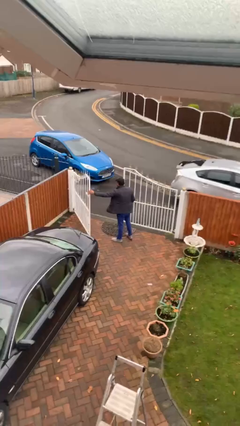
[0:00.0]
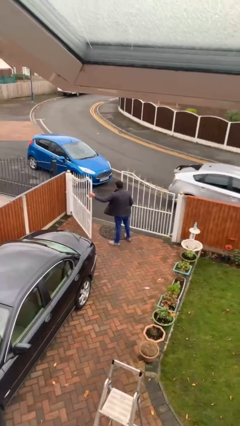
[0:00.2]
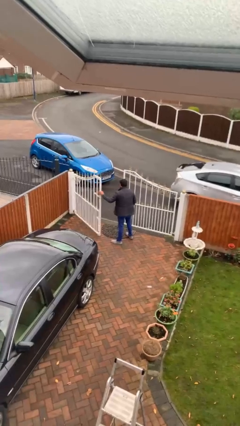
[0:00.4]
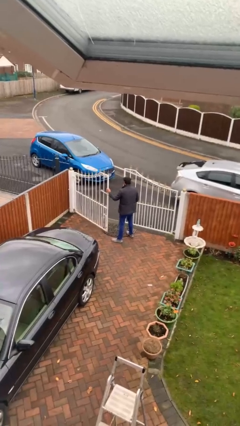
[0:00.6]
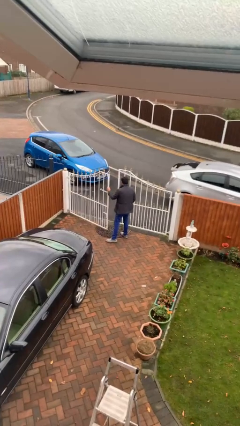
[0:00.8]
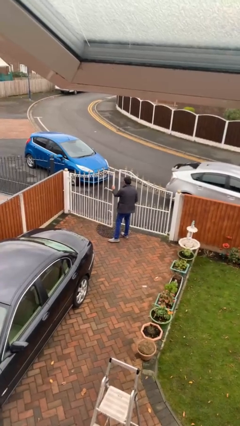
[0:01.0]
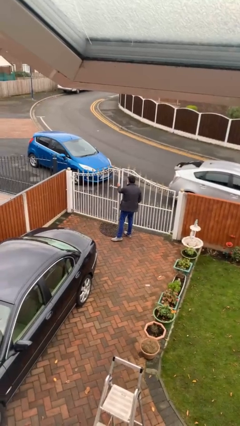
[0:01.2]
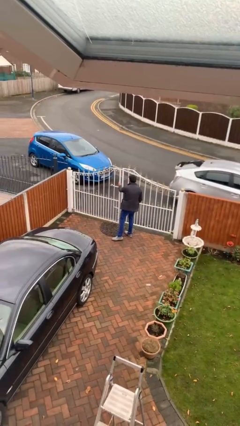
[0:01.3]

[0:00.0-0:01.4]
person closes facility door

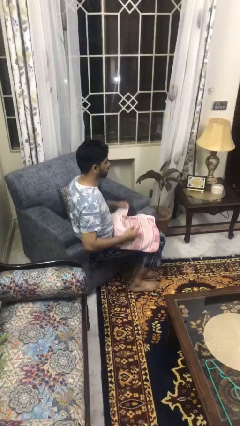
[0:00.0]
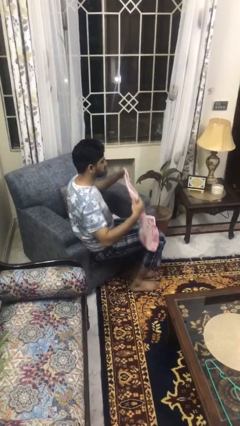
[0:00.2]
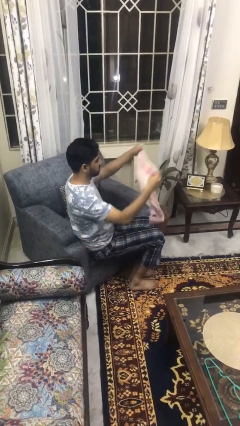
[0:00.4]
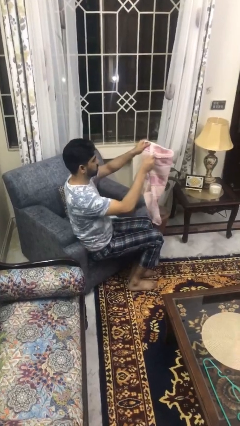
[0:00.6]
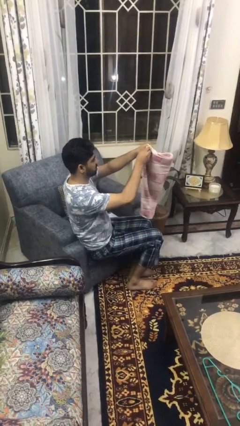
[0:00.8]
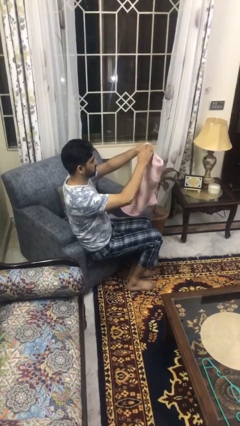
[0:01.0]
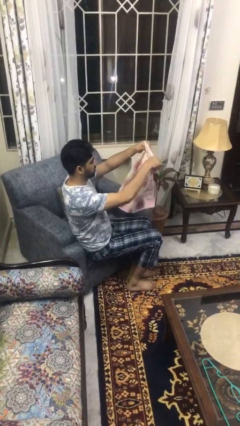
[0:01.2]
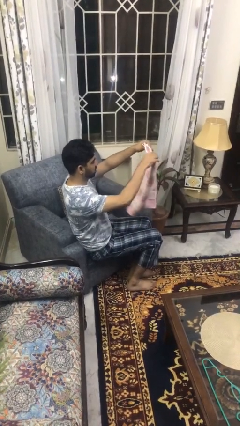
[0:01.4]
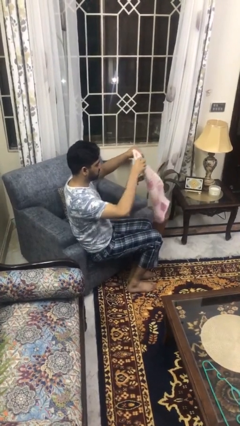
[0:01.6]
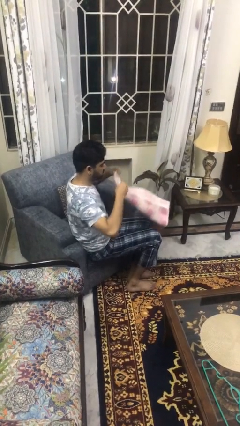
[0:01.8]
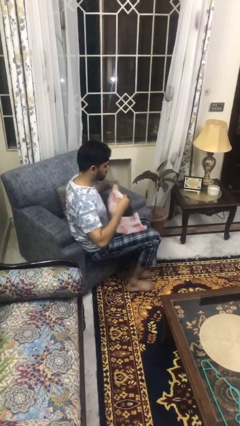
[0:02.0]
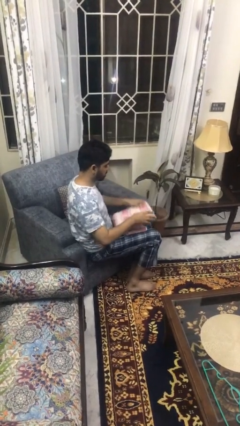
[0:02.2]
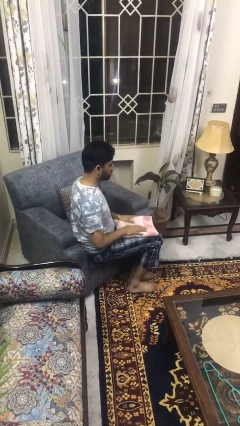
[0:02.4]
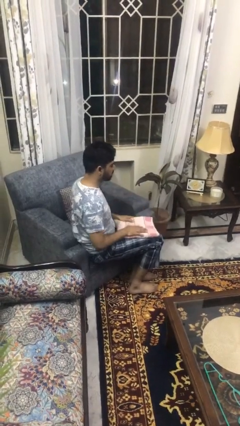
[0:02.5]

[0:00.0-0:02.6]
person folds towel

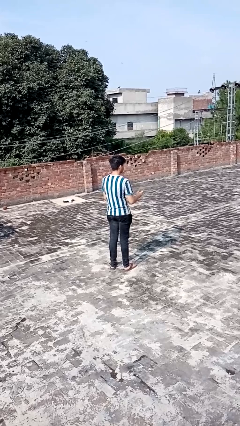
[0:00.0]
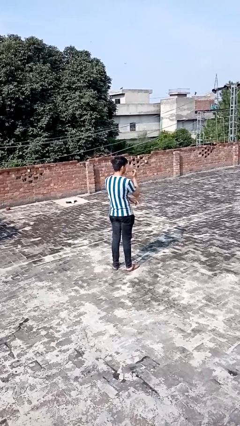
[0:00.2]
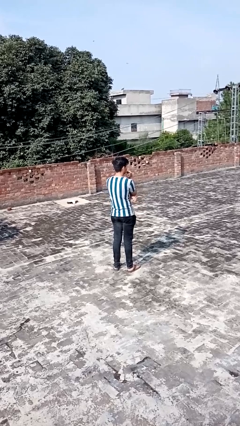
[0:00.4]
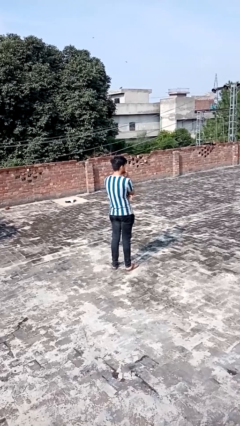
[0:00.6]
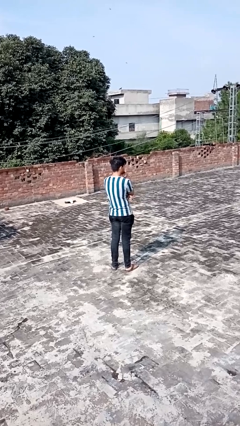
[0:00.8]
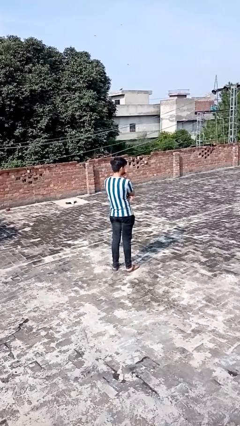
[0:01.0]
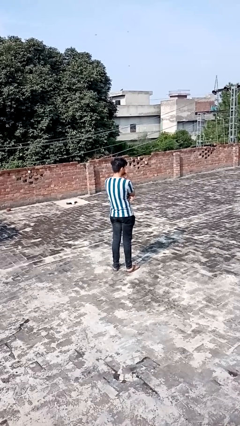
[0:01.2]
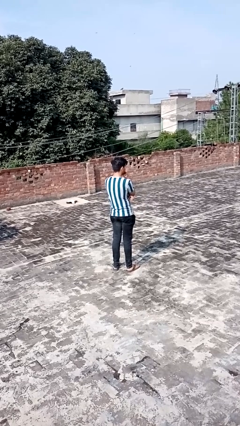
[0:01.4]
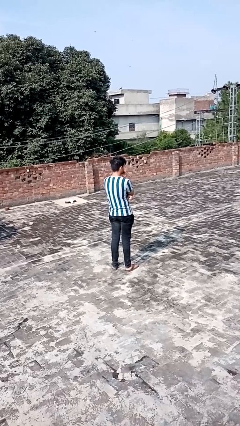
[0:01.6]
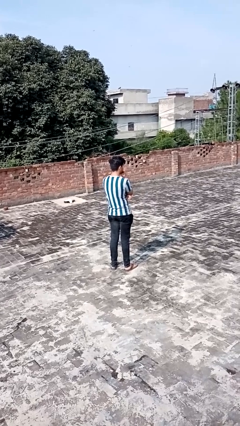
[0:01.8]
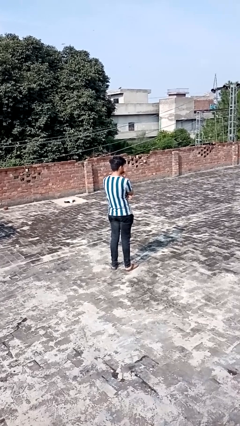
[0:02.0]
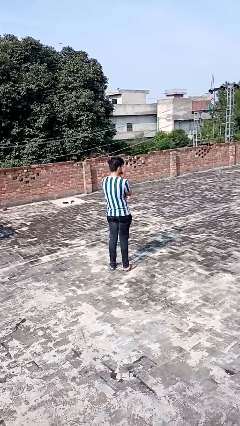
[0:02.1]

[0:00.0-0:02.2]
person strokes chin

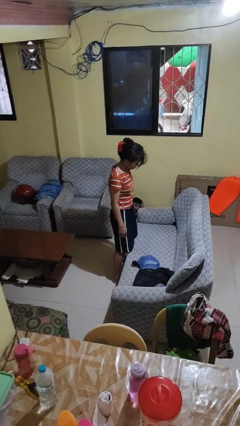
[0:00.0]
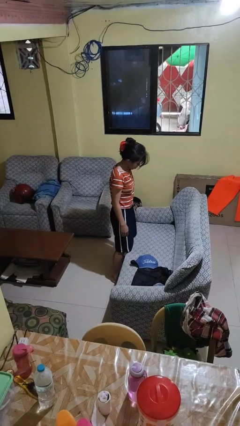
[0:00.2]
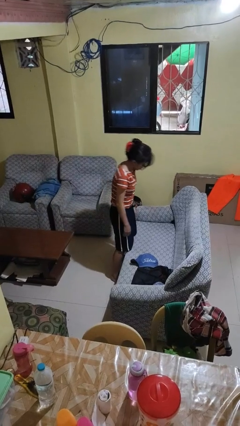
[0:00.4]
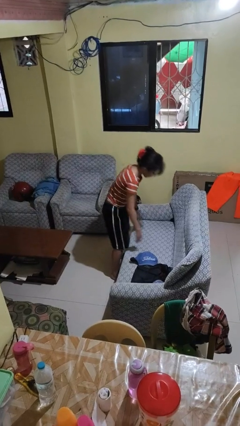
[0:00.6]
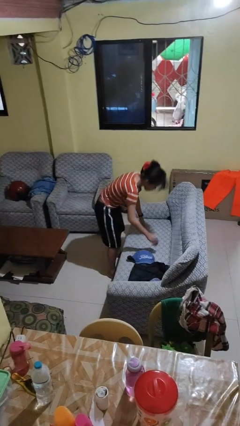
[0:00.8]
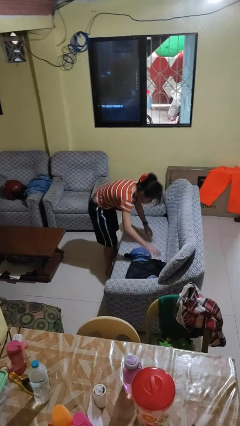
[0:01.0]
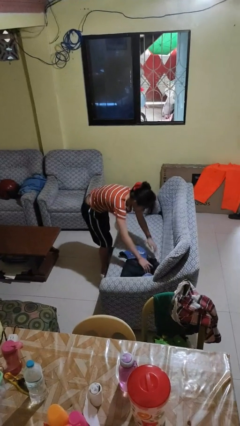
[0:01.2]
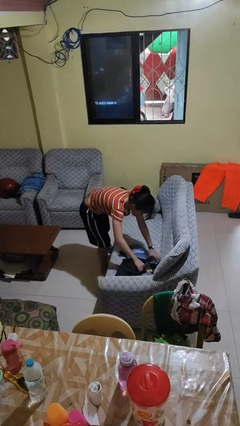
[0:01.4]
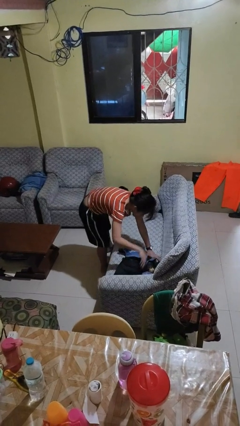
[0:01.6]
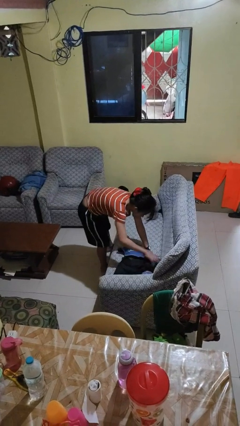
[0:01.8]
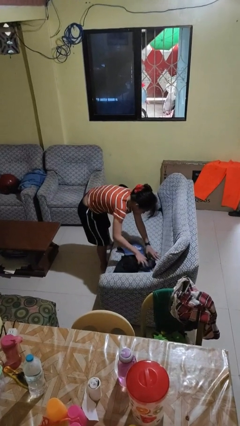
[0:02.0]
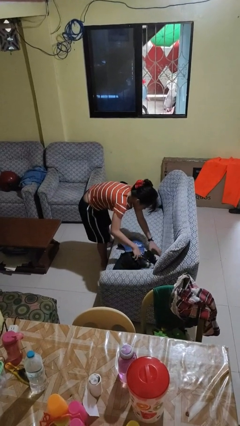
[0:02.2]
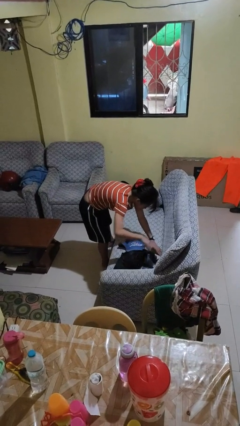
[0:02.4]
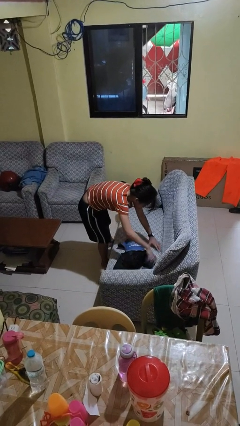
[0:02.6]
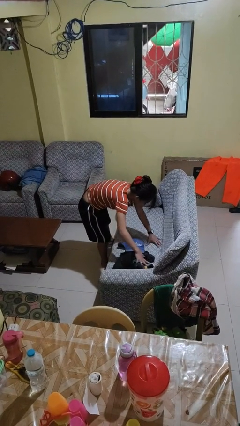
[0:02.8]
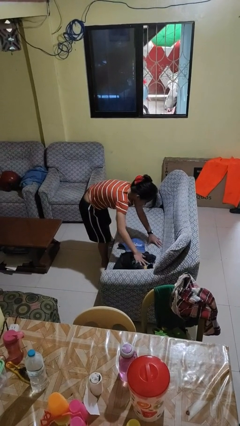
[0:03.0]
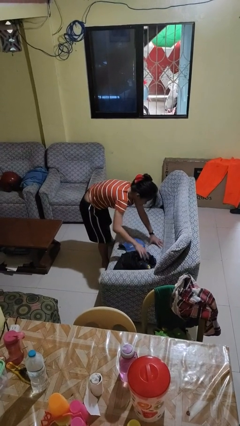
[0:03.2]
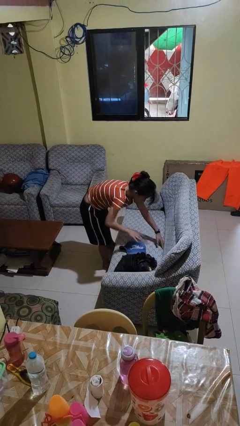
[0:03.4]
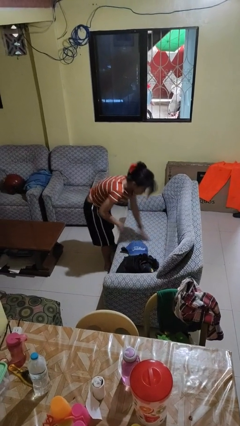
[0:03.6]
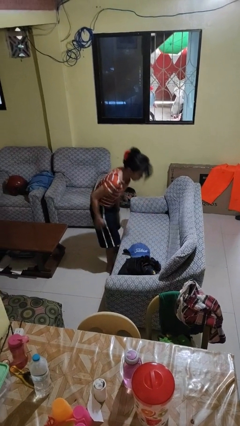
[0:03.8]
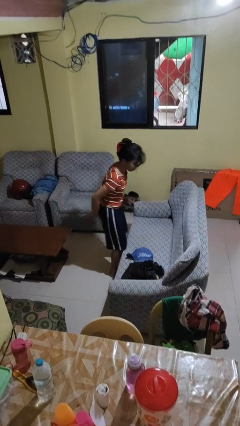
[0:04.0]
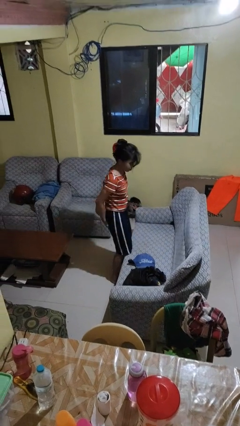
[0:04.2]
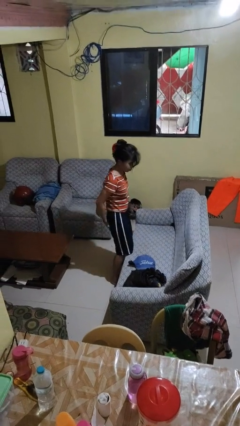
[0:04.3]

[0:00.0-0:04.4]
person searches in couch

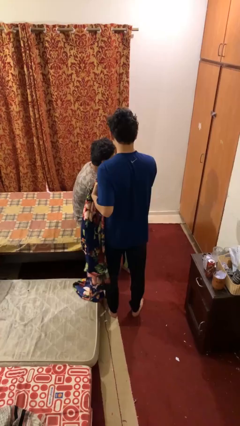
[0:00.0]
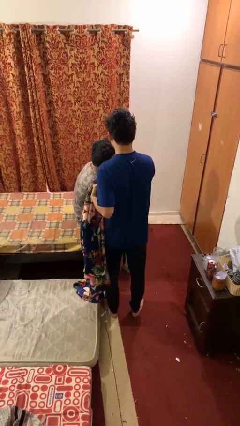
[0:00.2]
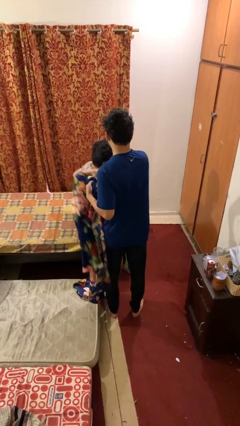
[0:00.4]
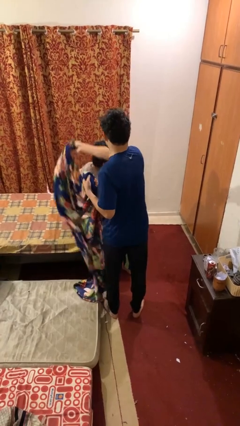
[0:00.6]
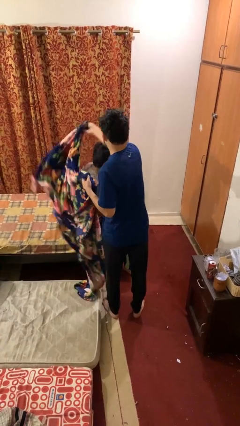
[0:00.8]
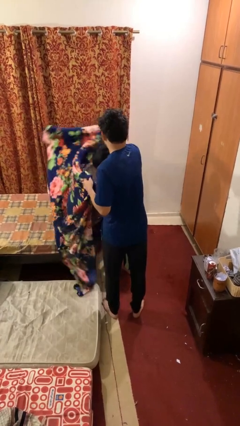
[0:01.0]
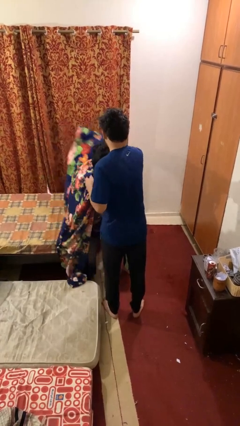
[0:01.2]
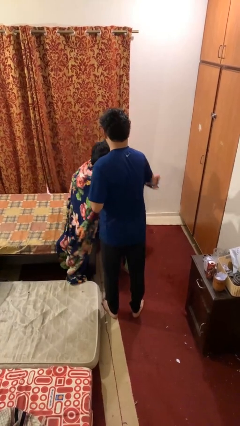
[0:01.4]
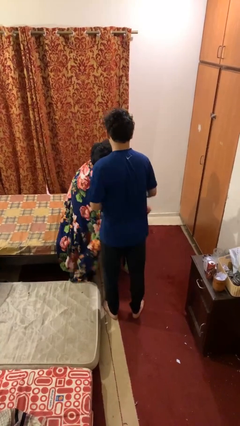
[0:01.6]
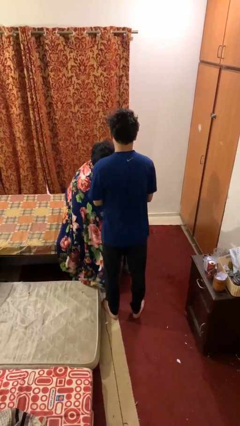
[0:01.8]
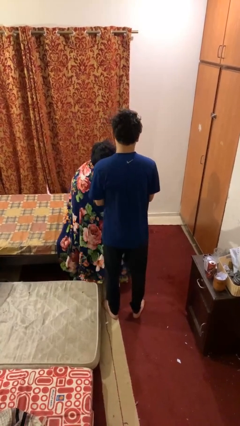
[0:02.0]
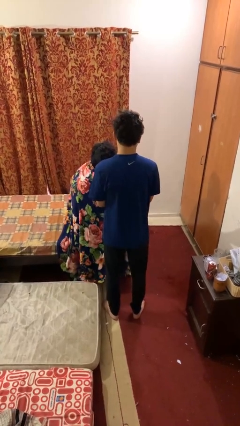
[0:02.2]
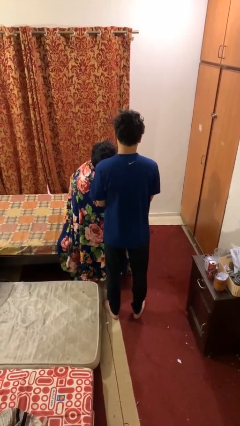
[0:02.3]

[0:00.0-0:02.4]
person covers friend with blanket

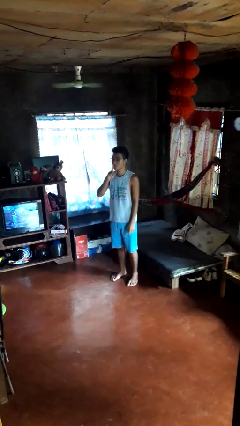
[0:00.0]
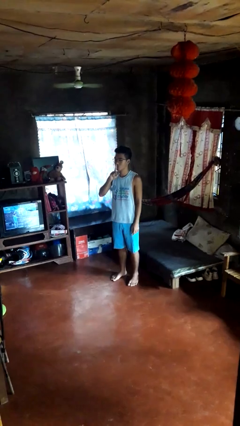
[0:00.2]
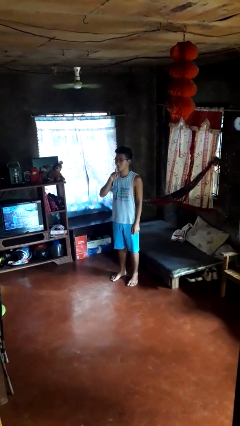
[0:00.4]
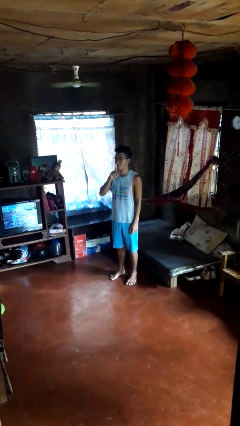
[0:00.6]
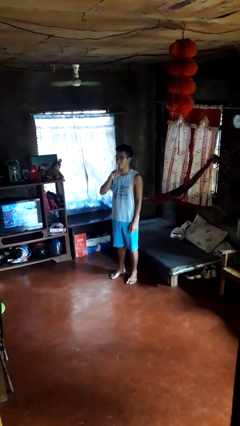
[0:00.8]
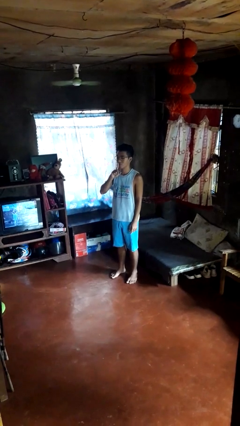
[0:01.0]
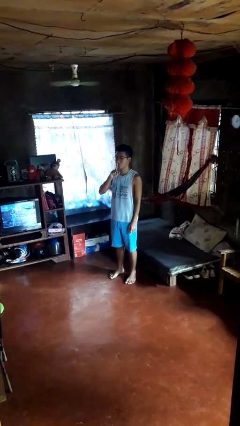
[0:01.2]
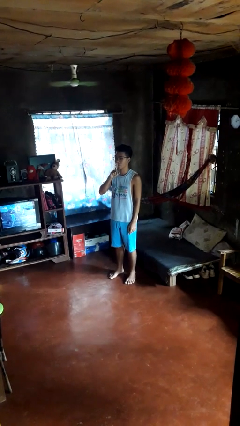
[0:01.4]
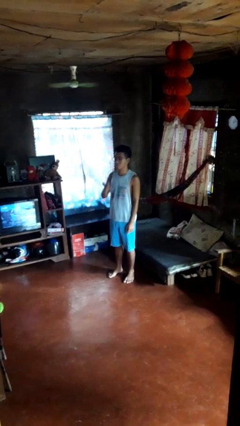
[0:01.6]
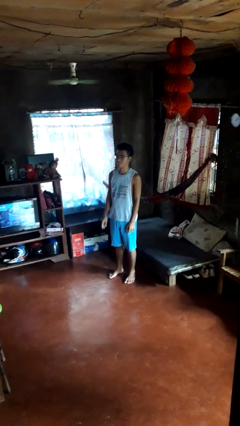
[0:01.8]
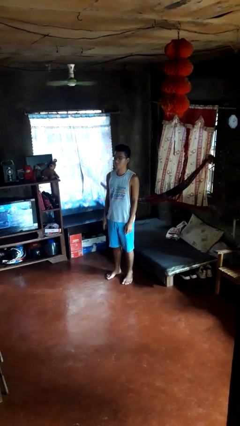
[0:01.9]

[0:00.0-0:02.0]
person gestures be quiet

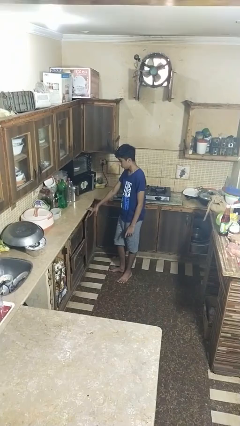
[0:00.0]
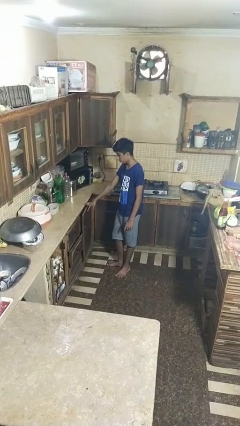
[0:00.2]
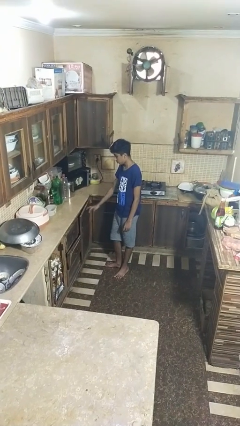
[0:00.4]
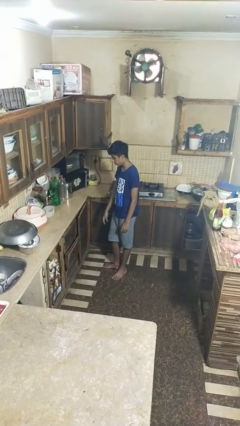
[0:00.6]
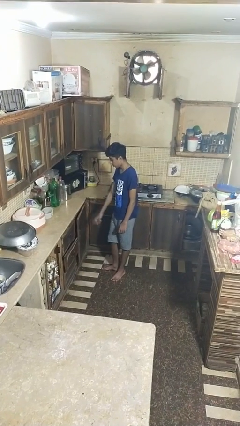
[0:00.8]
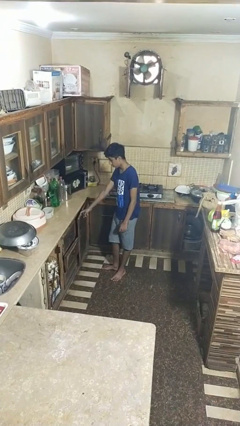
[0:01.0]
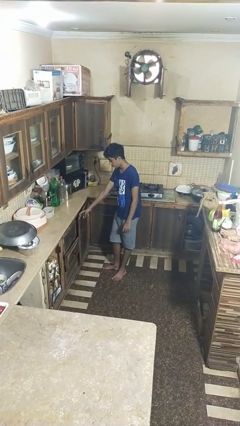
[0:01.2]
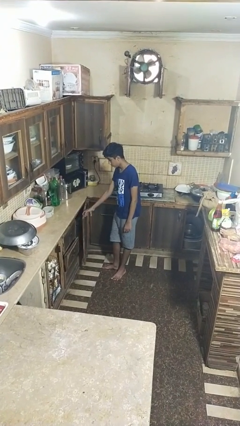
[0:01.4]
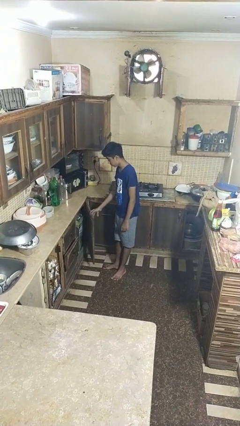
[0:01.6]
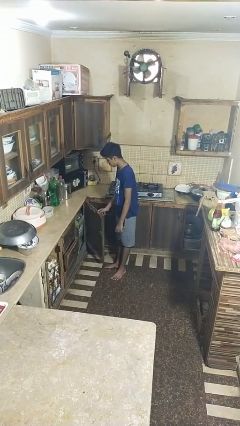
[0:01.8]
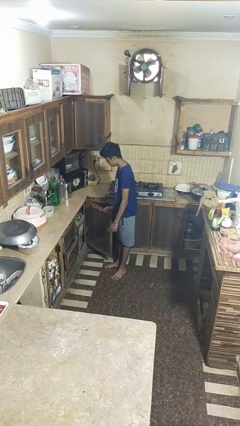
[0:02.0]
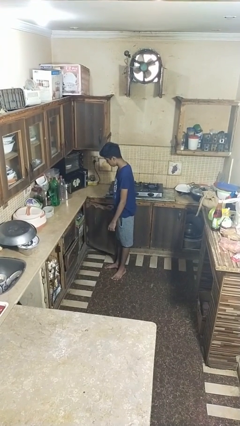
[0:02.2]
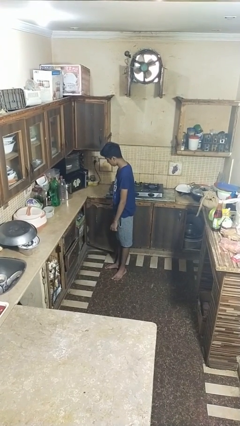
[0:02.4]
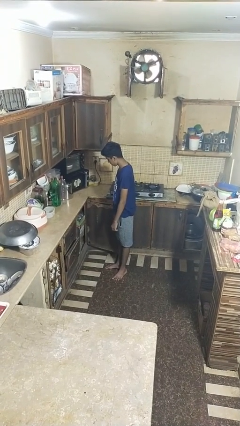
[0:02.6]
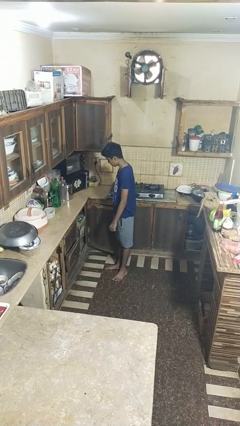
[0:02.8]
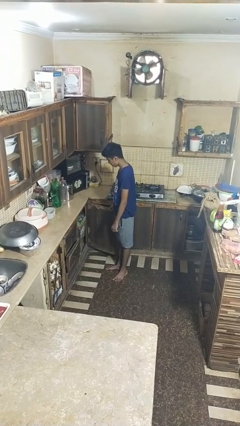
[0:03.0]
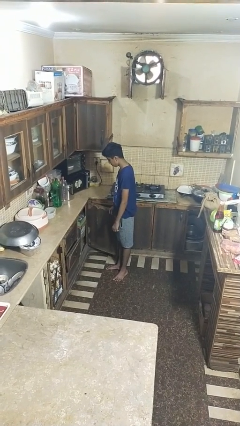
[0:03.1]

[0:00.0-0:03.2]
person opens closet door
